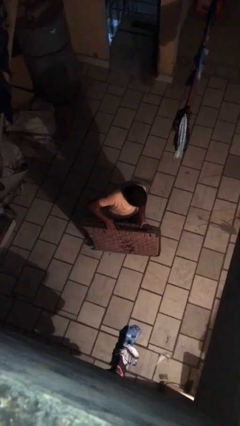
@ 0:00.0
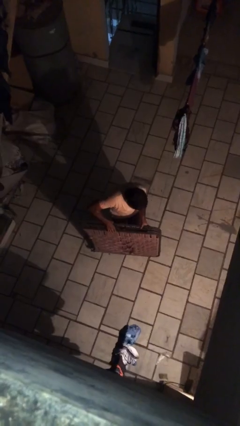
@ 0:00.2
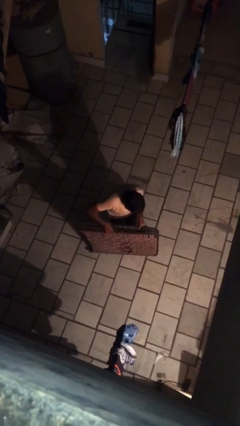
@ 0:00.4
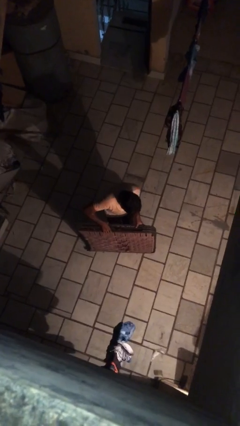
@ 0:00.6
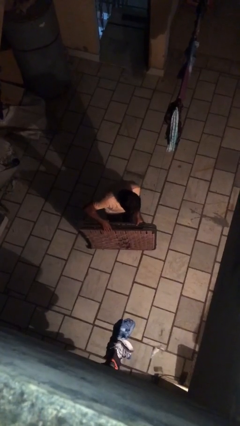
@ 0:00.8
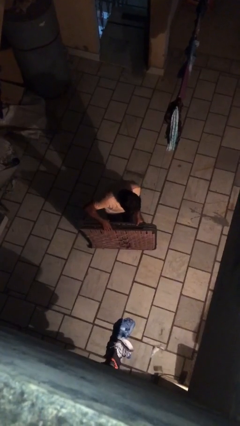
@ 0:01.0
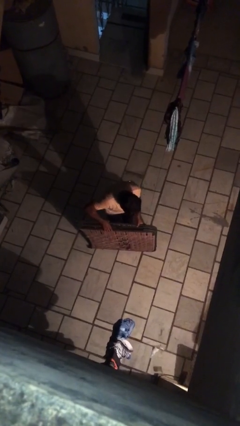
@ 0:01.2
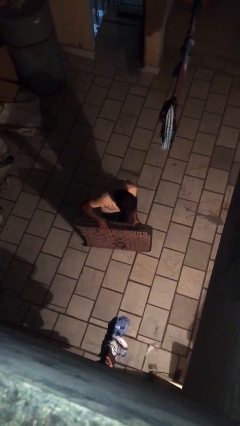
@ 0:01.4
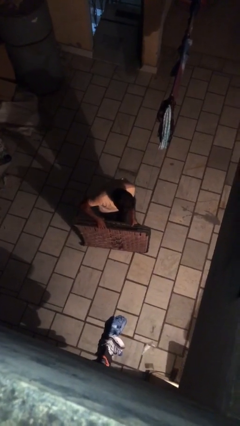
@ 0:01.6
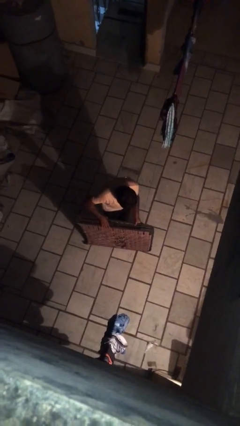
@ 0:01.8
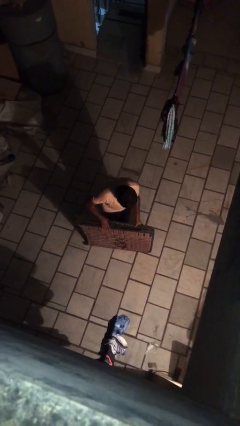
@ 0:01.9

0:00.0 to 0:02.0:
person puts down object on floor

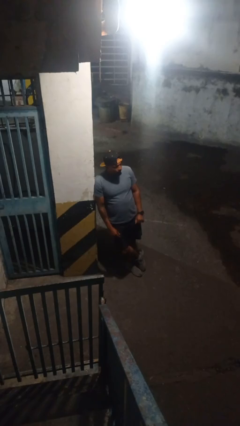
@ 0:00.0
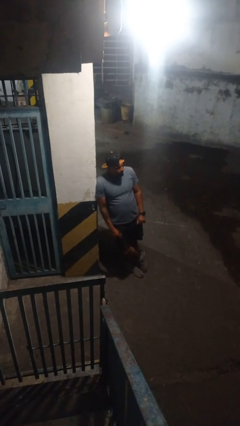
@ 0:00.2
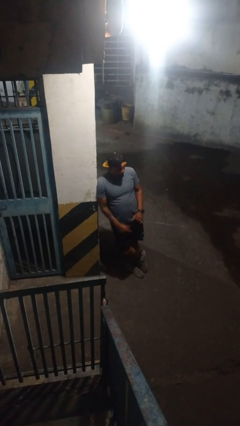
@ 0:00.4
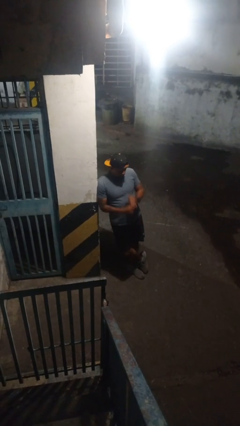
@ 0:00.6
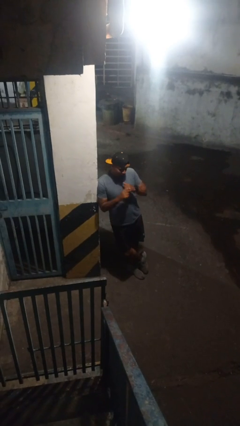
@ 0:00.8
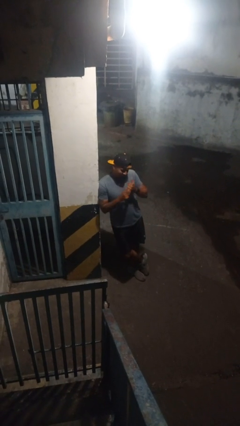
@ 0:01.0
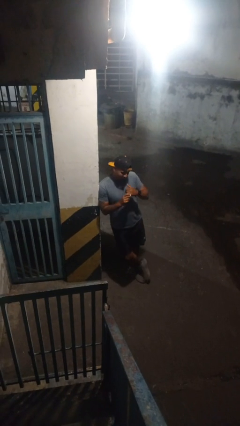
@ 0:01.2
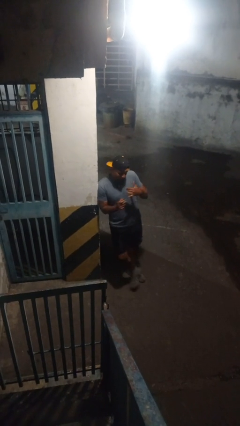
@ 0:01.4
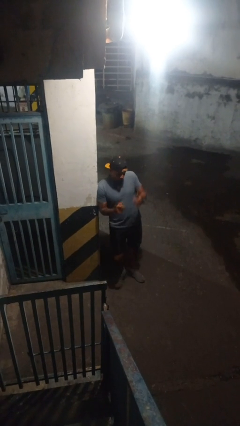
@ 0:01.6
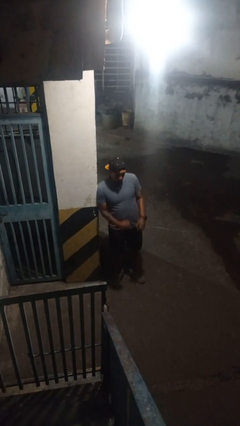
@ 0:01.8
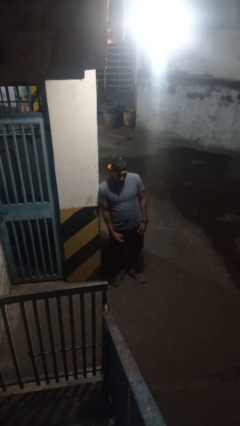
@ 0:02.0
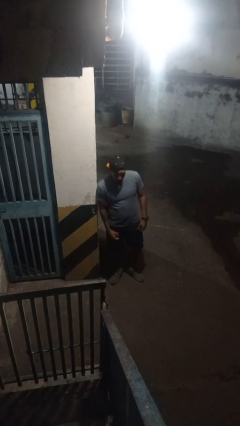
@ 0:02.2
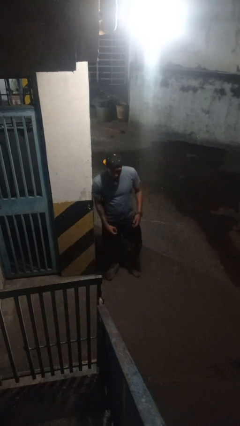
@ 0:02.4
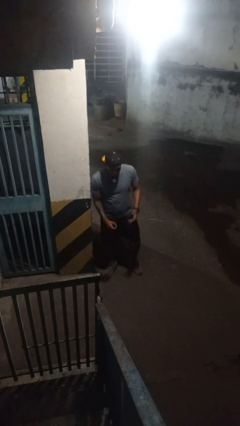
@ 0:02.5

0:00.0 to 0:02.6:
person takes off ring

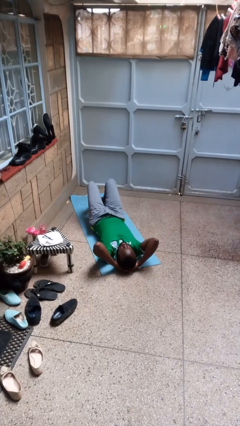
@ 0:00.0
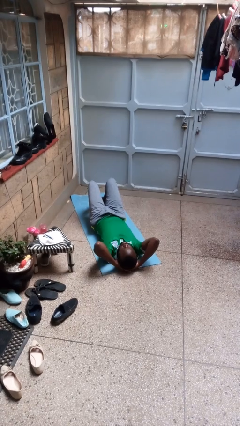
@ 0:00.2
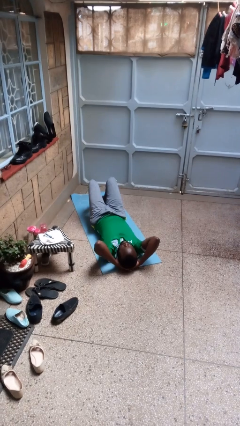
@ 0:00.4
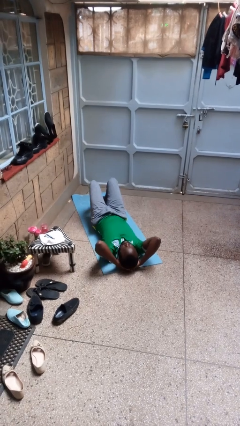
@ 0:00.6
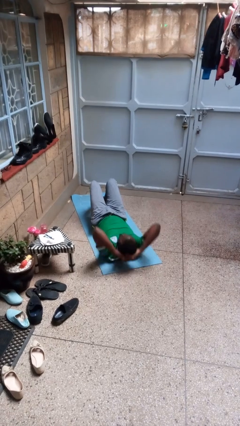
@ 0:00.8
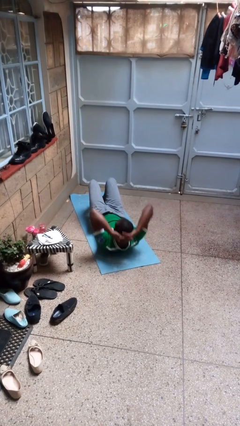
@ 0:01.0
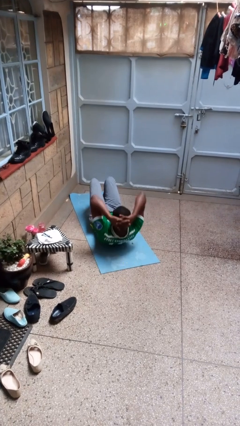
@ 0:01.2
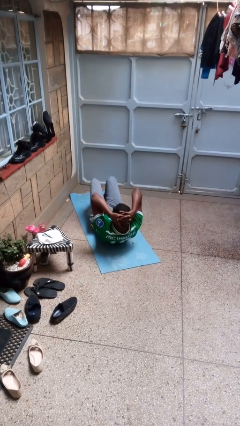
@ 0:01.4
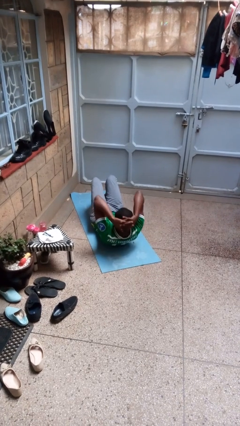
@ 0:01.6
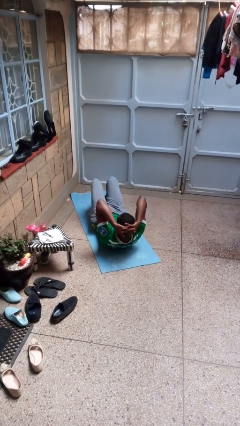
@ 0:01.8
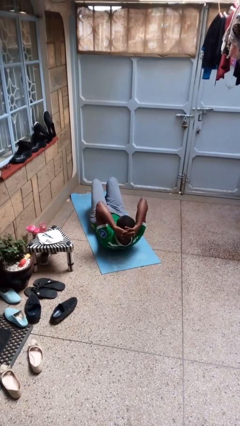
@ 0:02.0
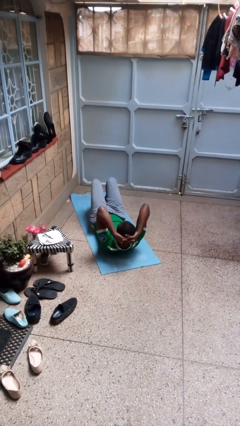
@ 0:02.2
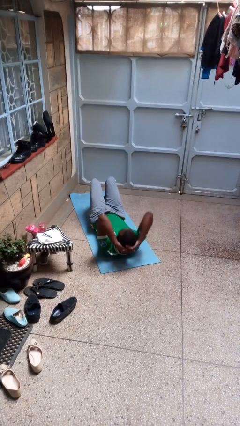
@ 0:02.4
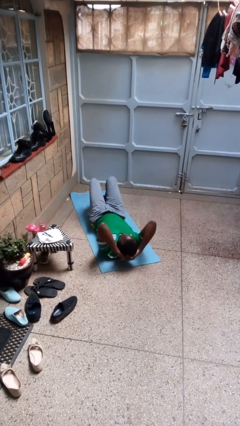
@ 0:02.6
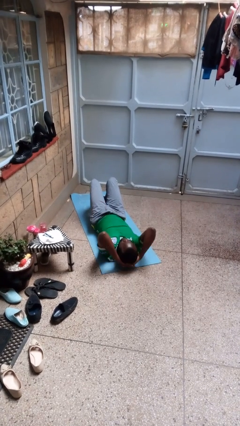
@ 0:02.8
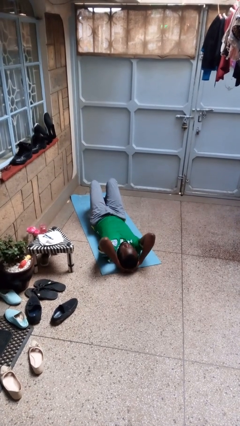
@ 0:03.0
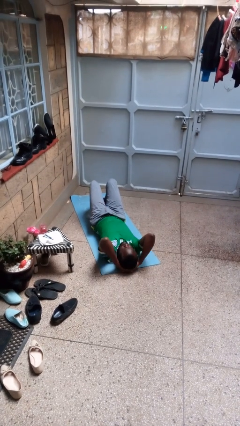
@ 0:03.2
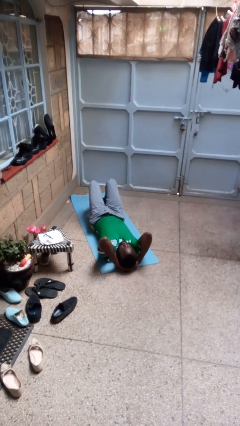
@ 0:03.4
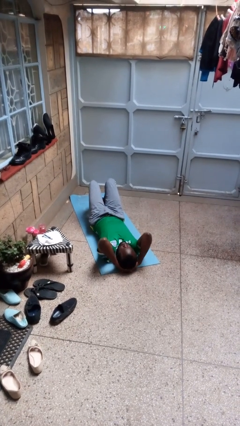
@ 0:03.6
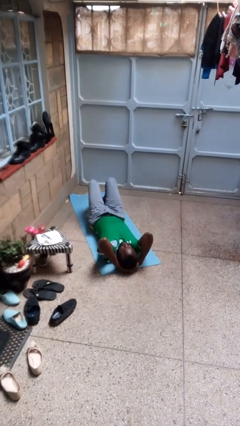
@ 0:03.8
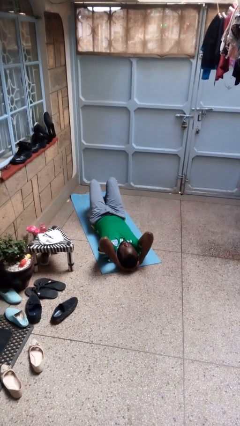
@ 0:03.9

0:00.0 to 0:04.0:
person exercises with situp

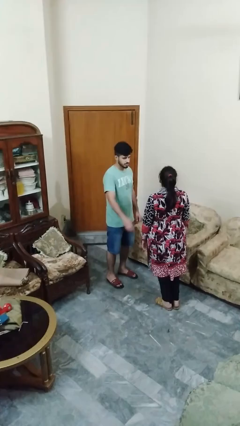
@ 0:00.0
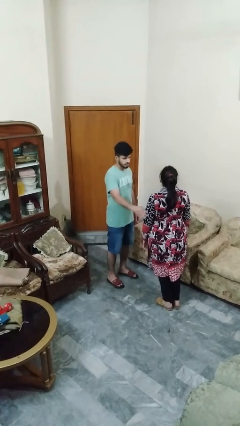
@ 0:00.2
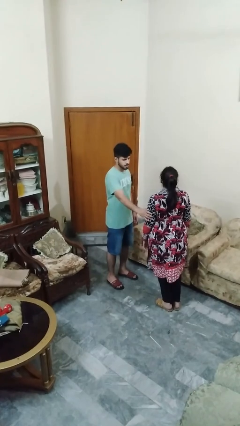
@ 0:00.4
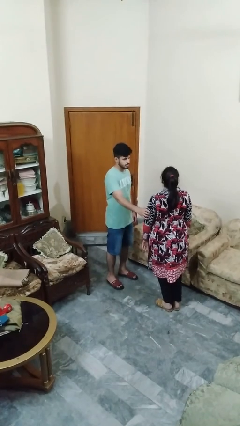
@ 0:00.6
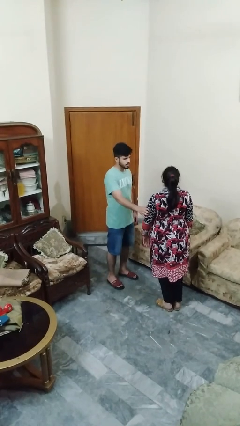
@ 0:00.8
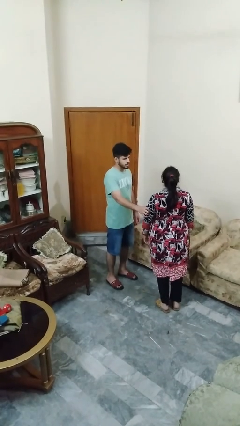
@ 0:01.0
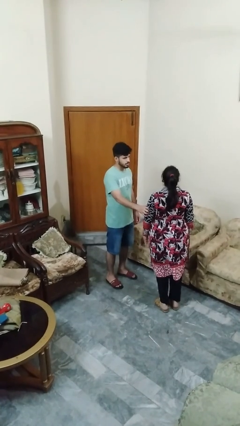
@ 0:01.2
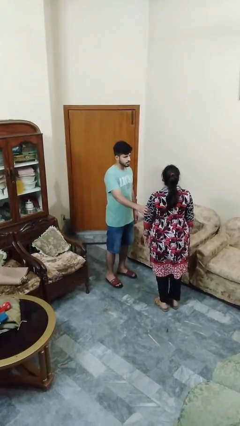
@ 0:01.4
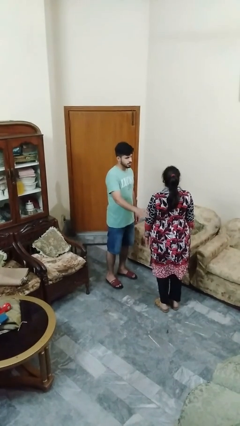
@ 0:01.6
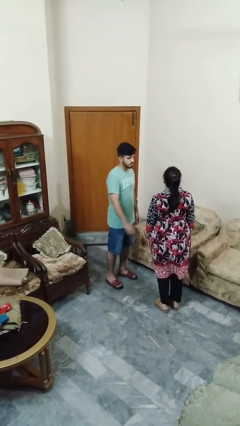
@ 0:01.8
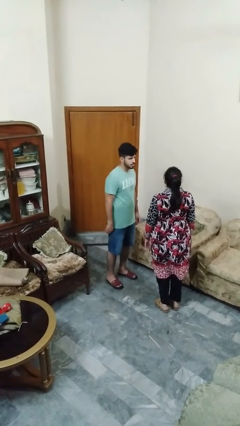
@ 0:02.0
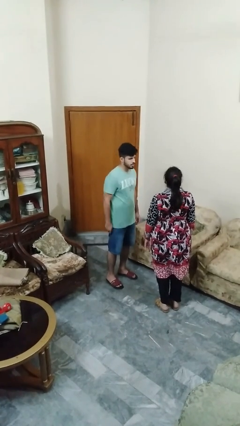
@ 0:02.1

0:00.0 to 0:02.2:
person grabs person by bicep

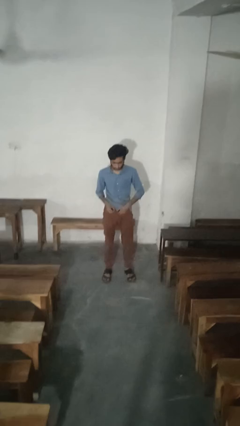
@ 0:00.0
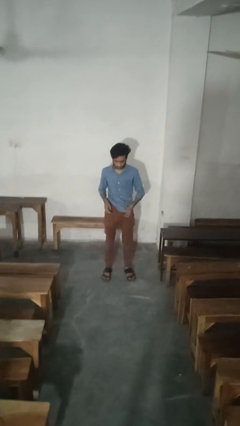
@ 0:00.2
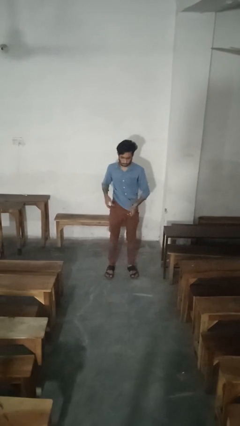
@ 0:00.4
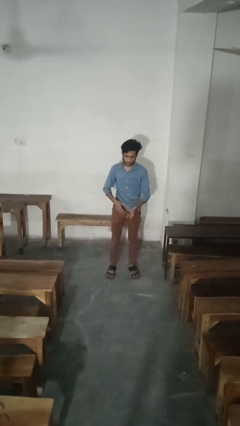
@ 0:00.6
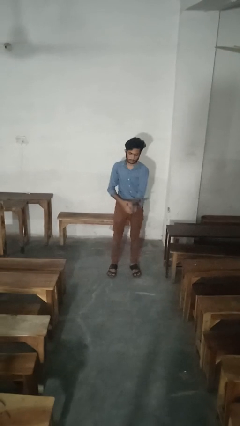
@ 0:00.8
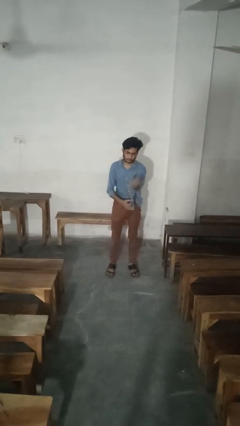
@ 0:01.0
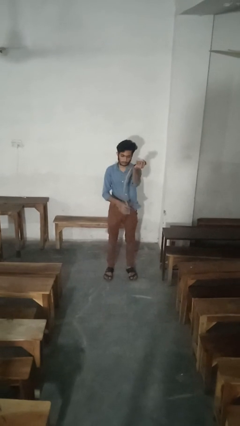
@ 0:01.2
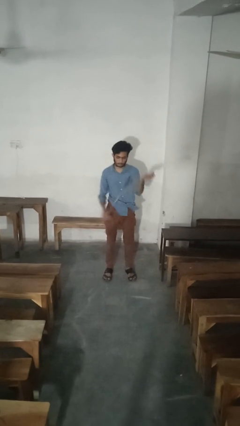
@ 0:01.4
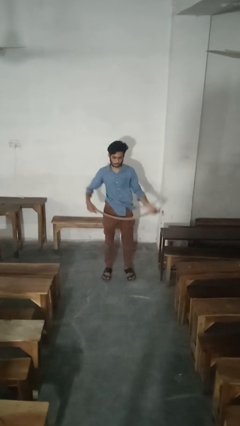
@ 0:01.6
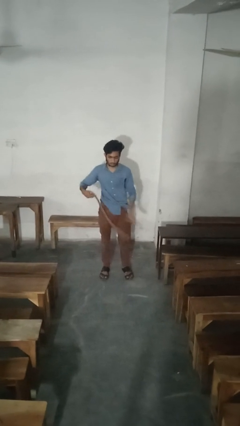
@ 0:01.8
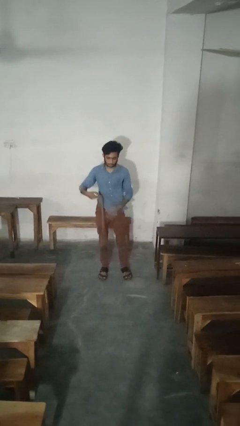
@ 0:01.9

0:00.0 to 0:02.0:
person takes off belt

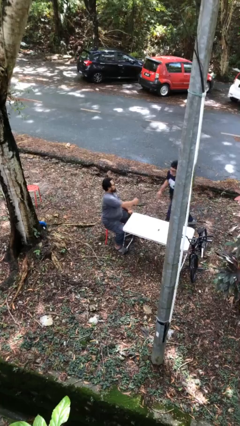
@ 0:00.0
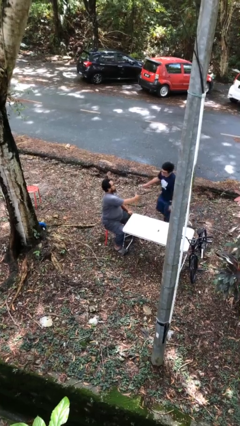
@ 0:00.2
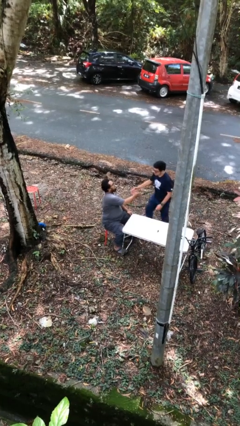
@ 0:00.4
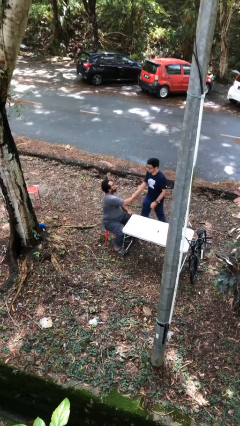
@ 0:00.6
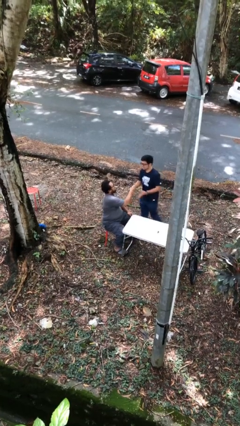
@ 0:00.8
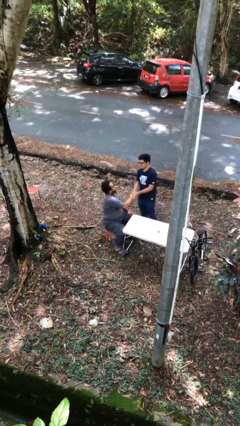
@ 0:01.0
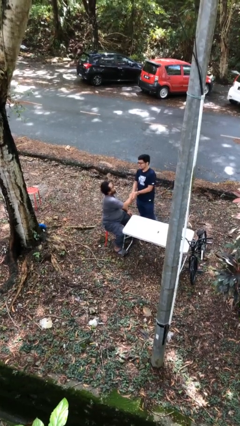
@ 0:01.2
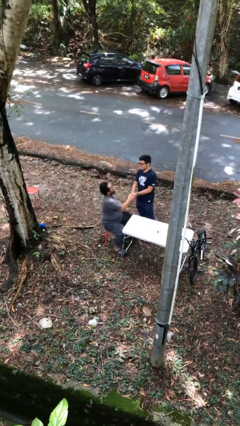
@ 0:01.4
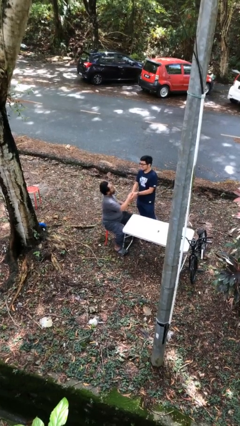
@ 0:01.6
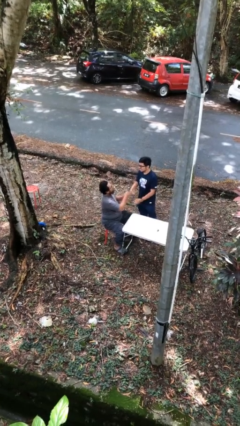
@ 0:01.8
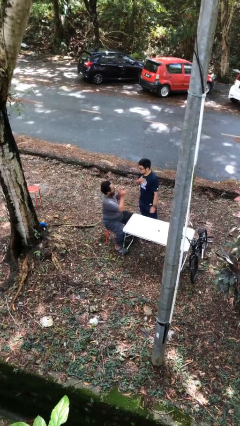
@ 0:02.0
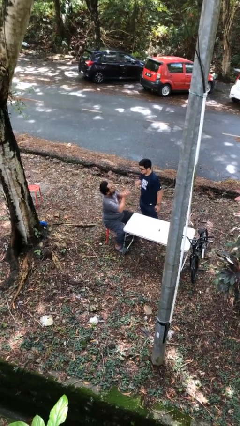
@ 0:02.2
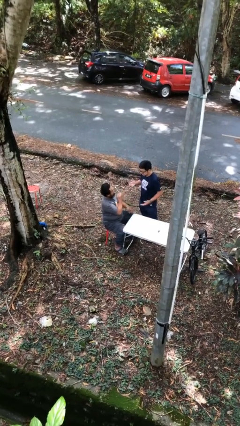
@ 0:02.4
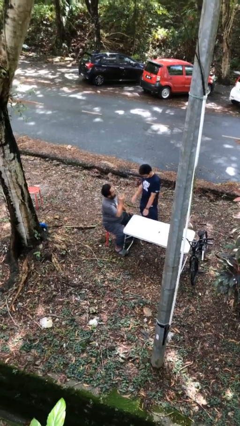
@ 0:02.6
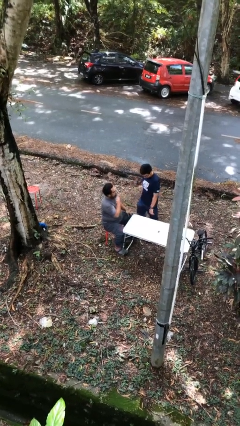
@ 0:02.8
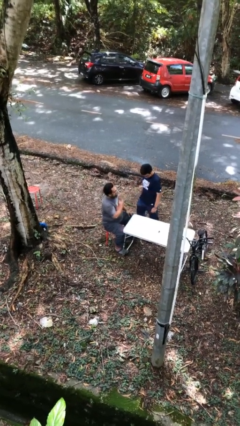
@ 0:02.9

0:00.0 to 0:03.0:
person shakes hand

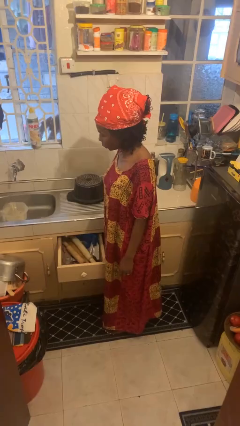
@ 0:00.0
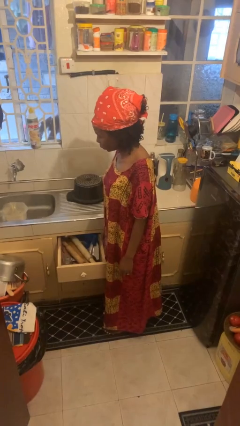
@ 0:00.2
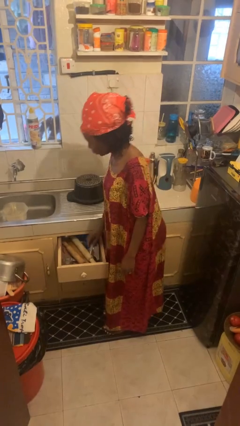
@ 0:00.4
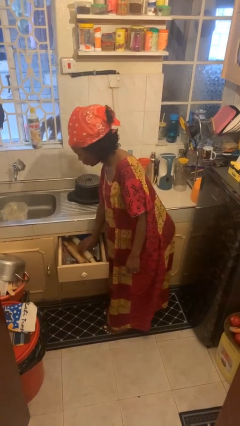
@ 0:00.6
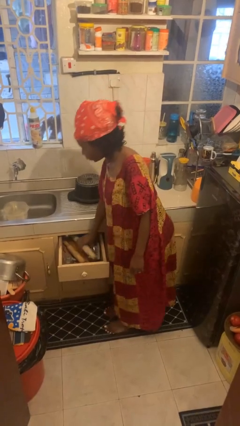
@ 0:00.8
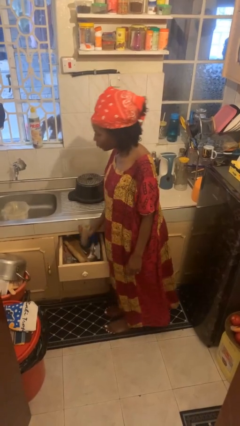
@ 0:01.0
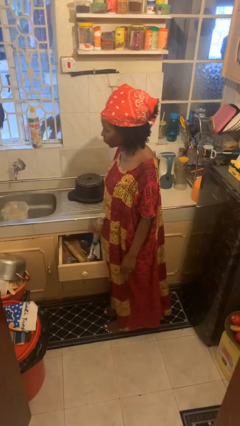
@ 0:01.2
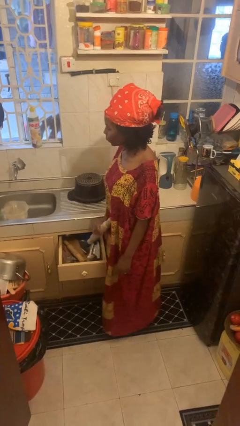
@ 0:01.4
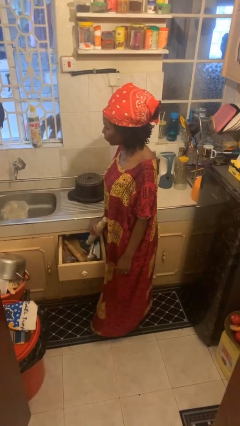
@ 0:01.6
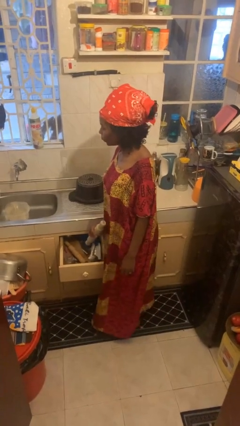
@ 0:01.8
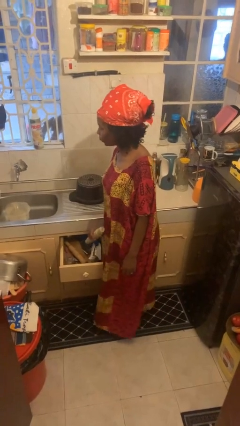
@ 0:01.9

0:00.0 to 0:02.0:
person takes object from kitchen drawer
